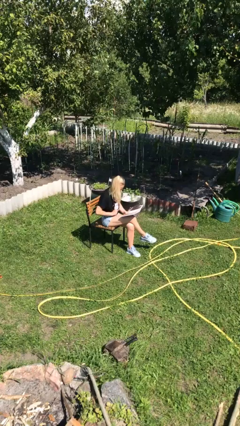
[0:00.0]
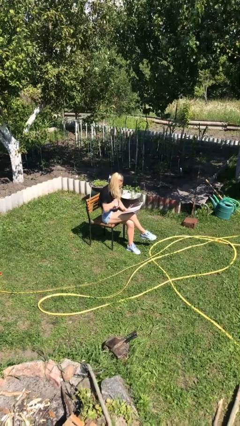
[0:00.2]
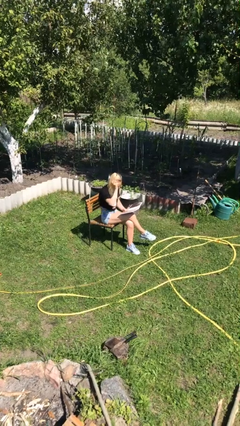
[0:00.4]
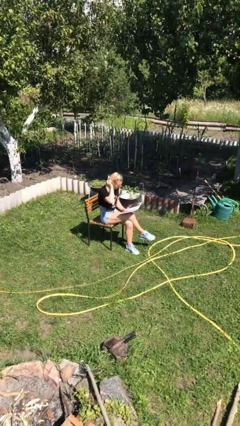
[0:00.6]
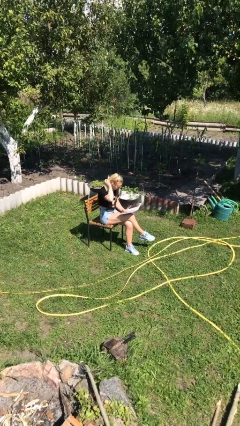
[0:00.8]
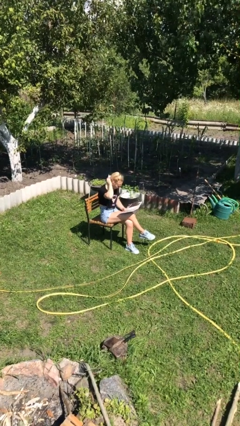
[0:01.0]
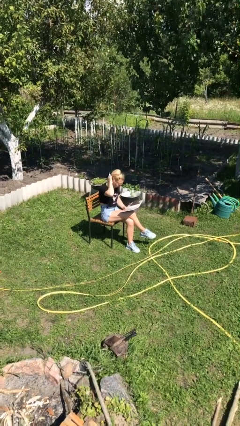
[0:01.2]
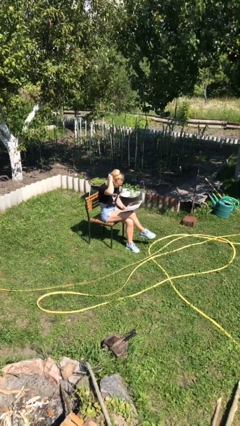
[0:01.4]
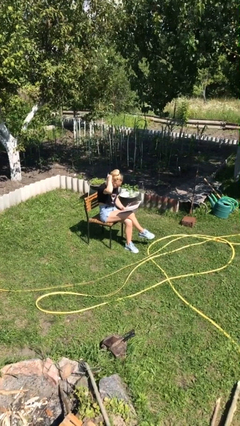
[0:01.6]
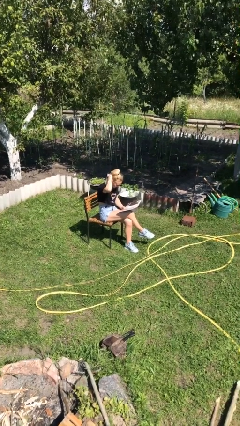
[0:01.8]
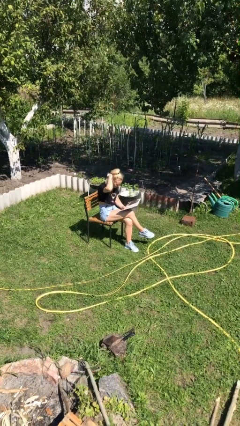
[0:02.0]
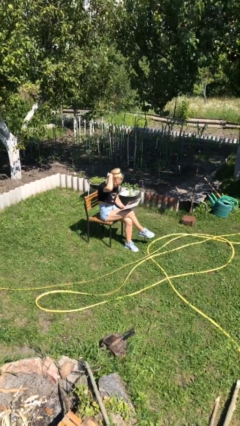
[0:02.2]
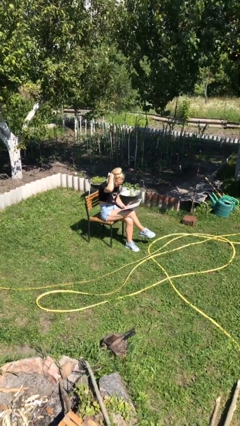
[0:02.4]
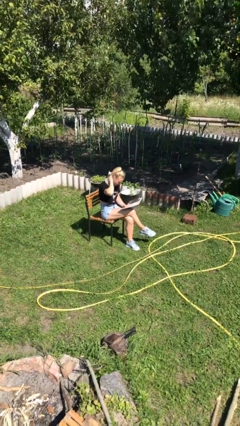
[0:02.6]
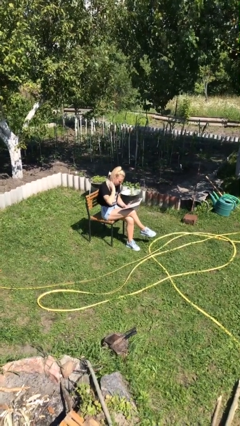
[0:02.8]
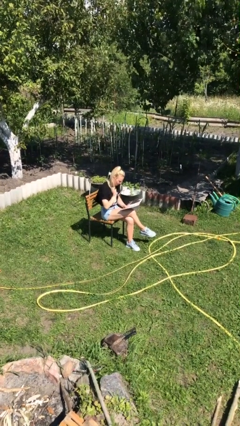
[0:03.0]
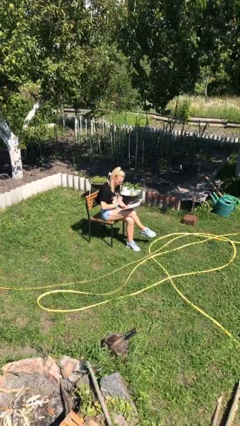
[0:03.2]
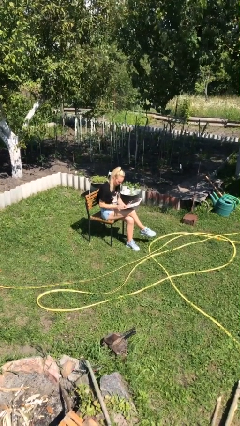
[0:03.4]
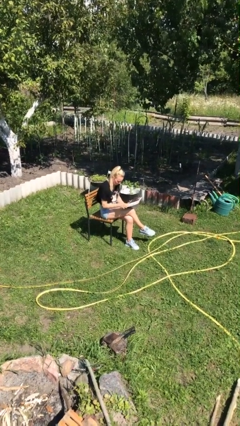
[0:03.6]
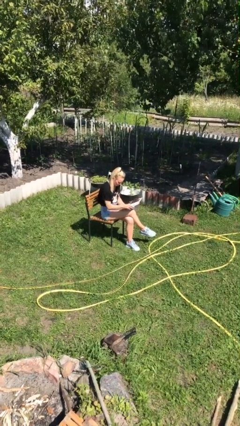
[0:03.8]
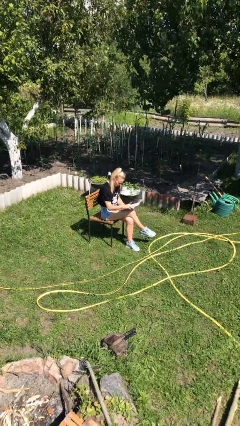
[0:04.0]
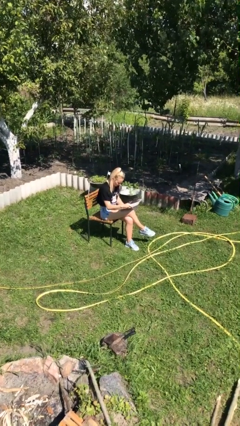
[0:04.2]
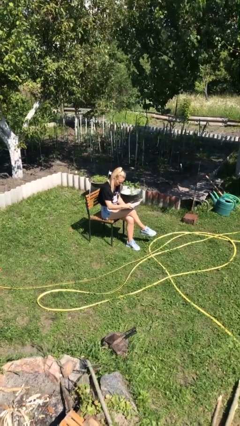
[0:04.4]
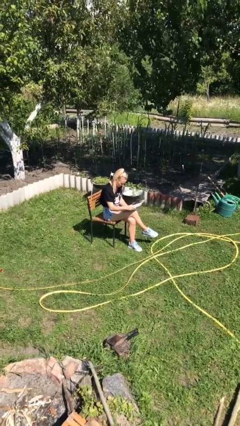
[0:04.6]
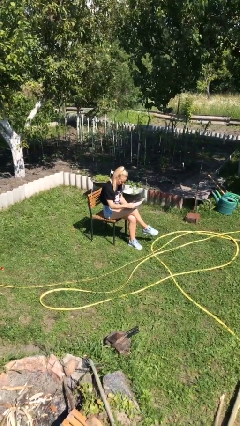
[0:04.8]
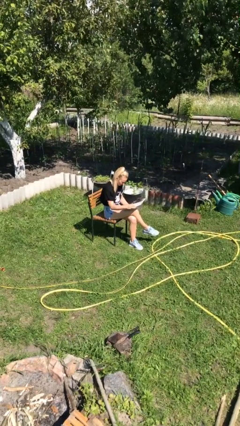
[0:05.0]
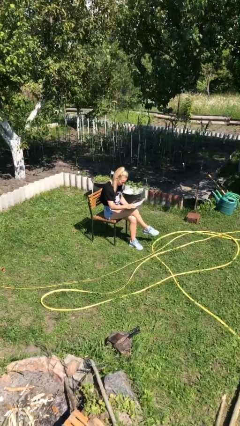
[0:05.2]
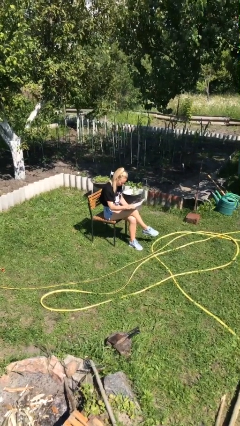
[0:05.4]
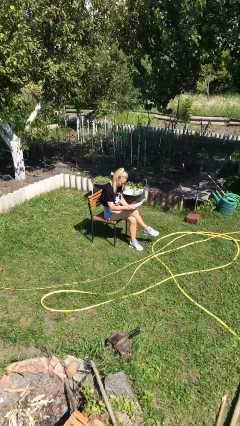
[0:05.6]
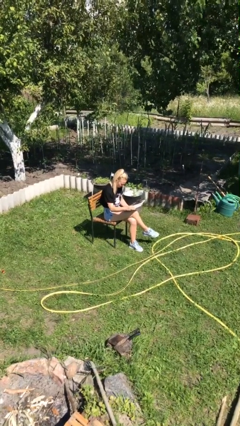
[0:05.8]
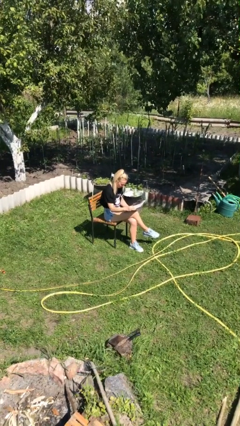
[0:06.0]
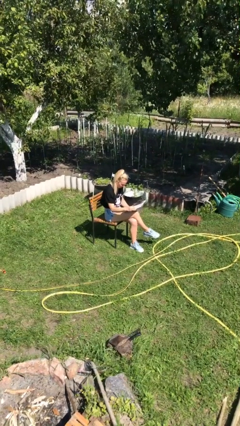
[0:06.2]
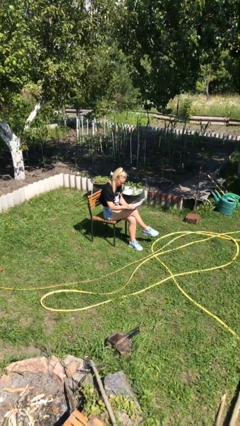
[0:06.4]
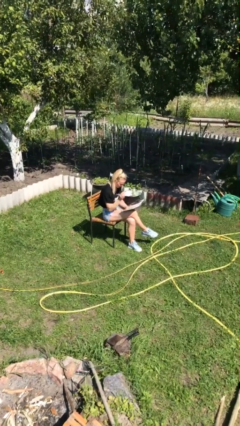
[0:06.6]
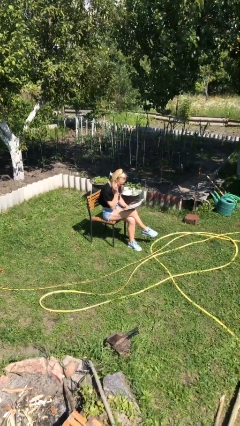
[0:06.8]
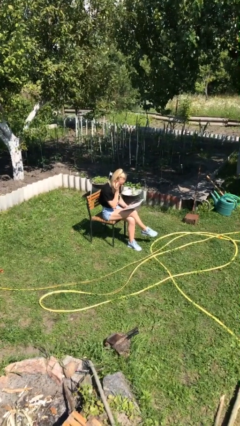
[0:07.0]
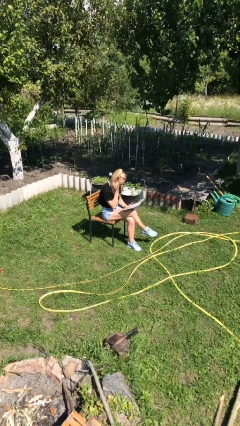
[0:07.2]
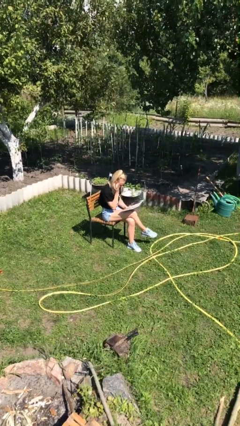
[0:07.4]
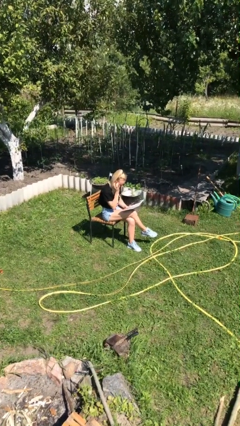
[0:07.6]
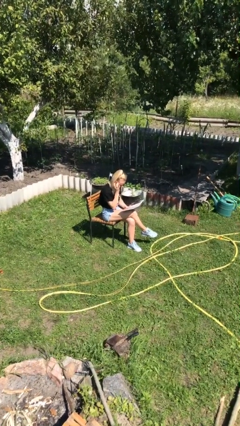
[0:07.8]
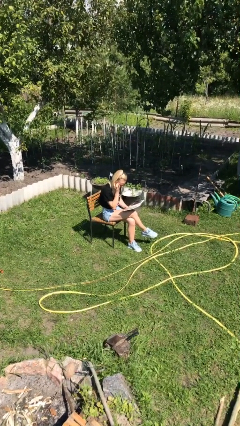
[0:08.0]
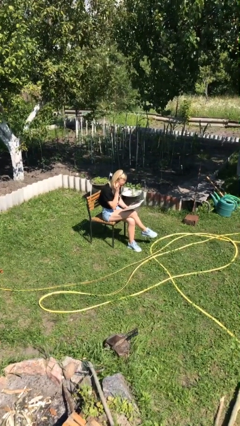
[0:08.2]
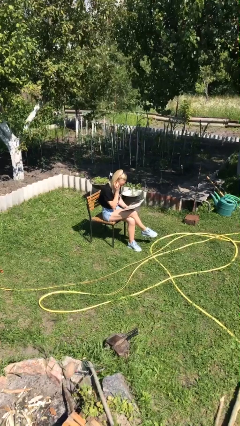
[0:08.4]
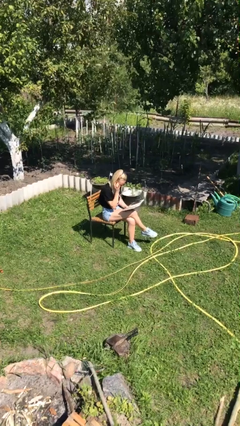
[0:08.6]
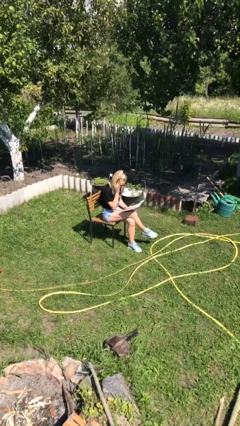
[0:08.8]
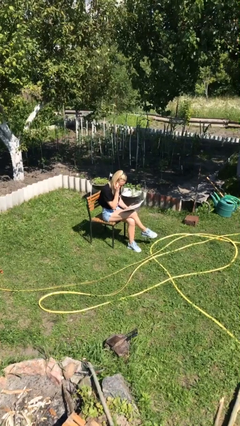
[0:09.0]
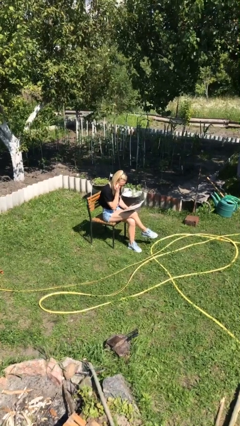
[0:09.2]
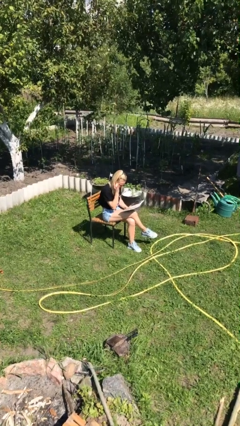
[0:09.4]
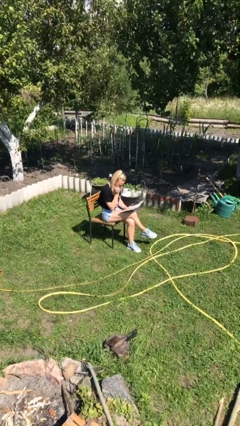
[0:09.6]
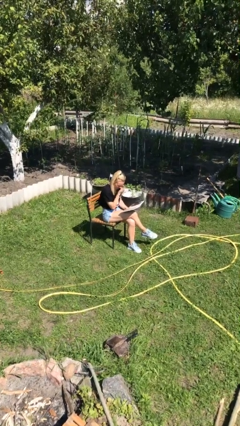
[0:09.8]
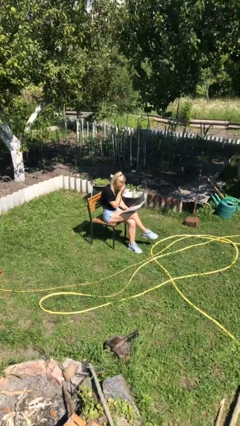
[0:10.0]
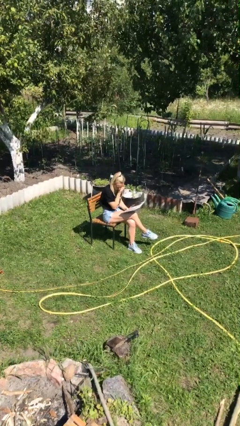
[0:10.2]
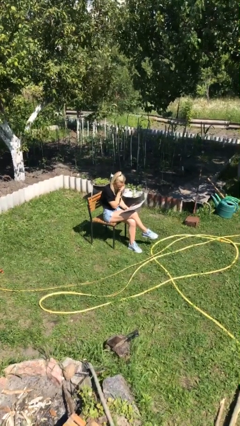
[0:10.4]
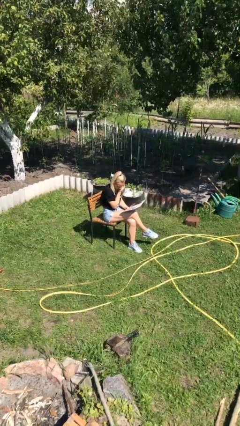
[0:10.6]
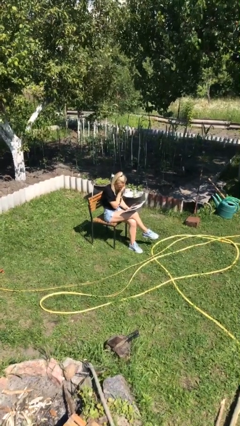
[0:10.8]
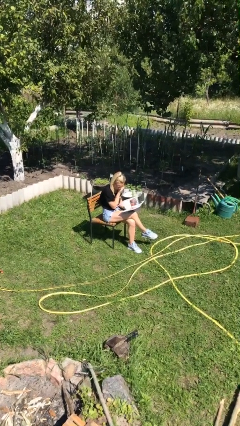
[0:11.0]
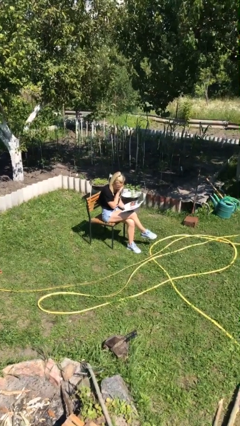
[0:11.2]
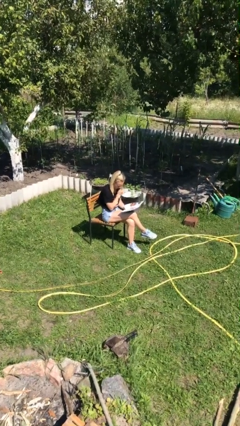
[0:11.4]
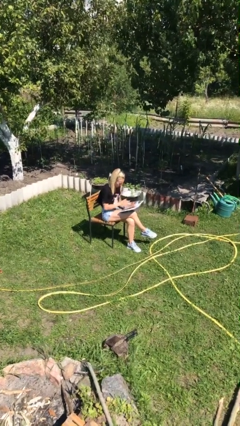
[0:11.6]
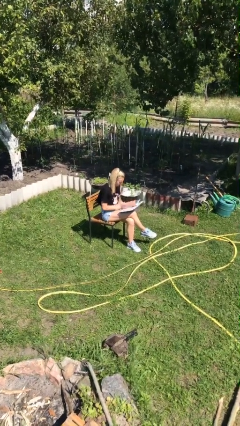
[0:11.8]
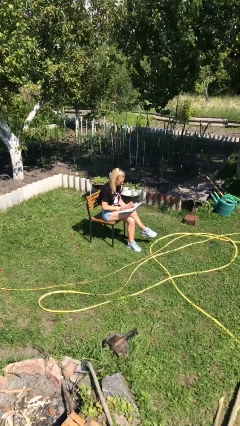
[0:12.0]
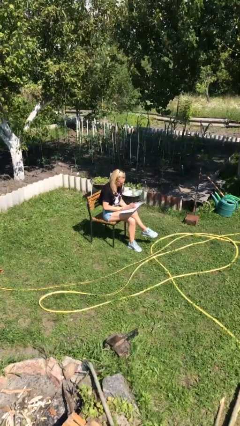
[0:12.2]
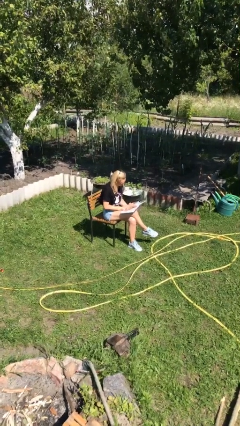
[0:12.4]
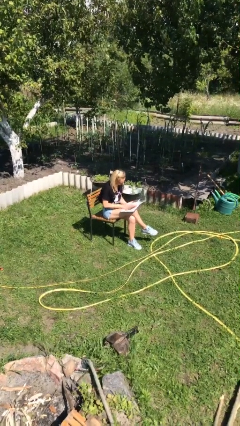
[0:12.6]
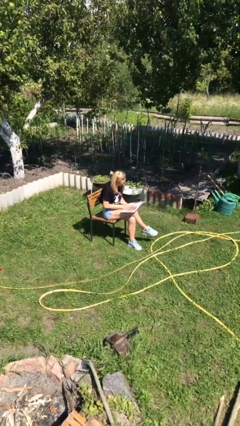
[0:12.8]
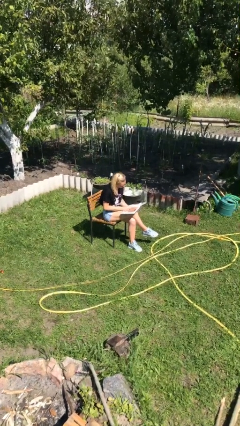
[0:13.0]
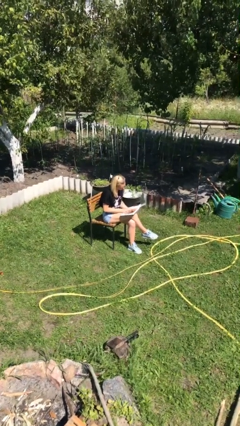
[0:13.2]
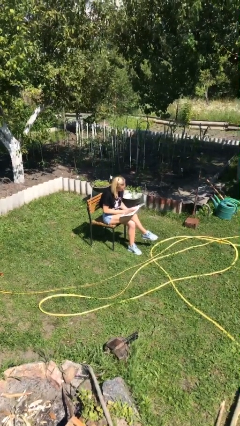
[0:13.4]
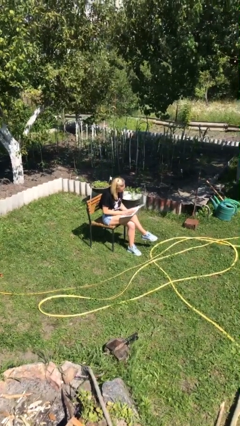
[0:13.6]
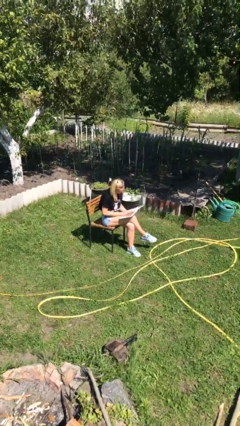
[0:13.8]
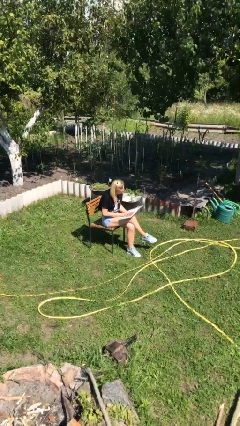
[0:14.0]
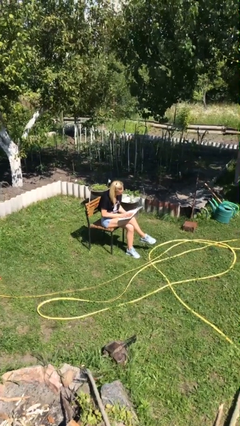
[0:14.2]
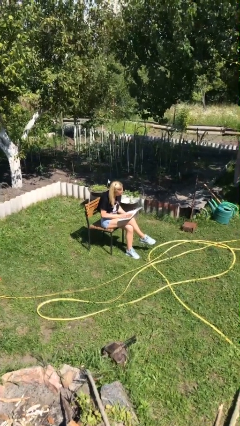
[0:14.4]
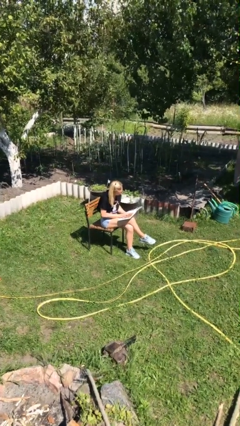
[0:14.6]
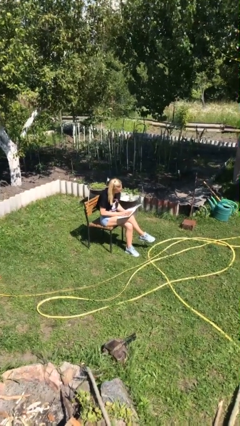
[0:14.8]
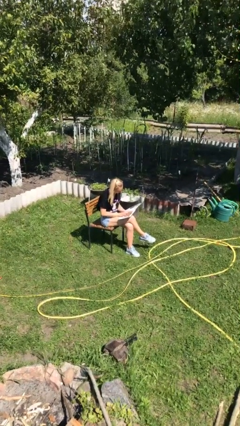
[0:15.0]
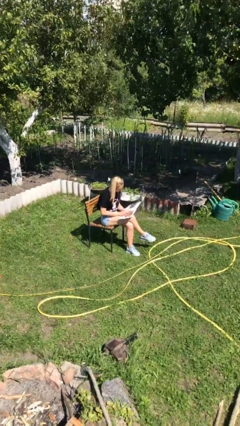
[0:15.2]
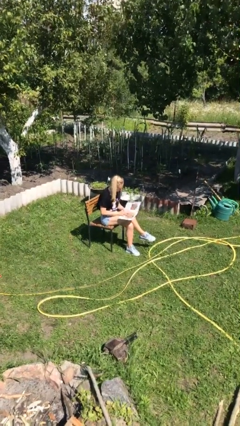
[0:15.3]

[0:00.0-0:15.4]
person reads document

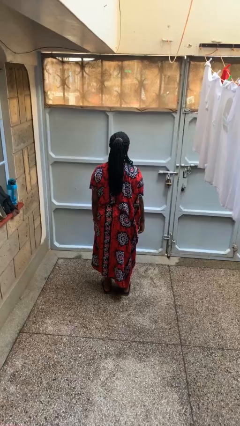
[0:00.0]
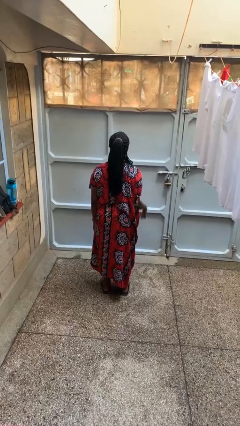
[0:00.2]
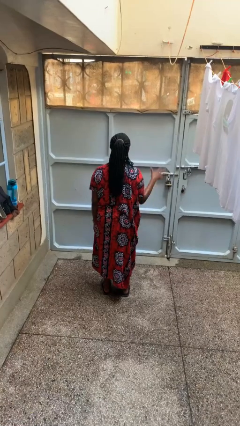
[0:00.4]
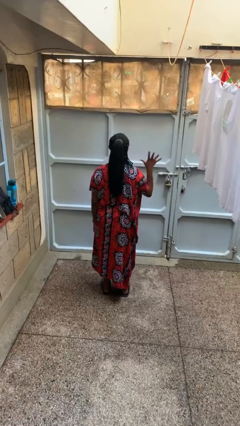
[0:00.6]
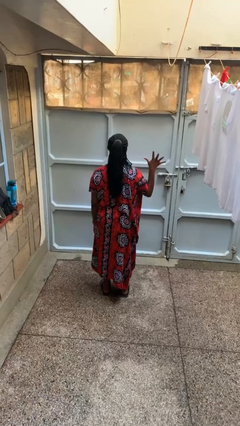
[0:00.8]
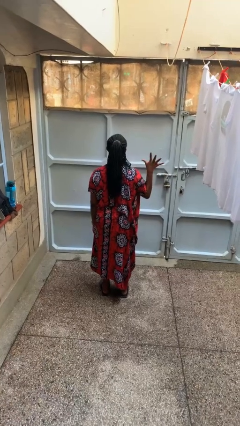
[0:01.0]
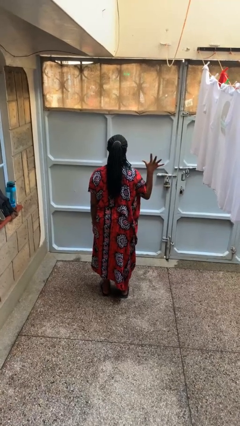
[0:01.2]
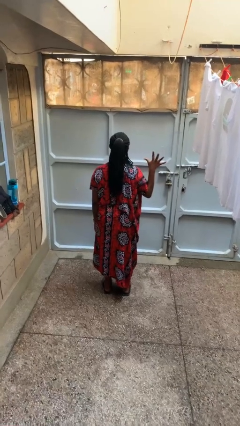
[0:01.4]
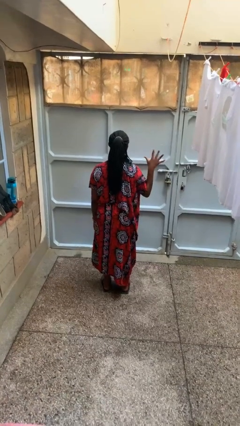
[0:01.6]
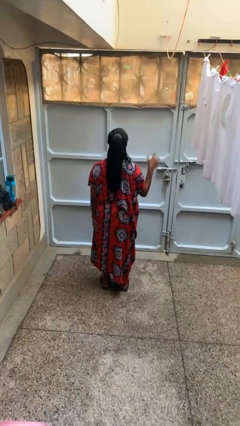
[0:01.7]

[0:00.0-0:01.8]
person gestures number five

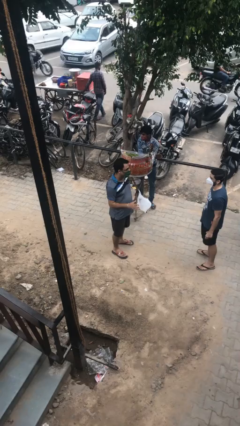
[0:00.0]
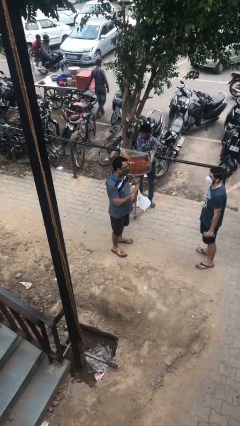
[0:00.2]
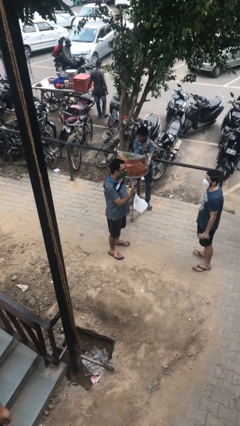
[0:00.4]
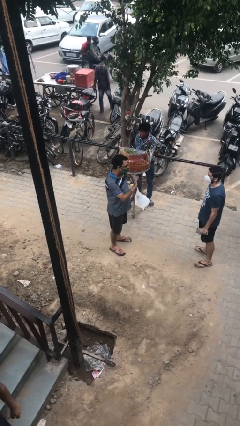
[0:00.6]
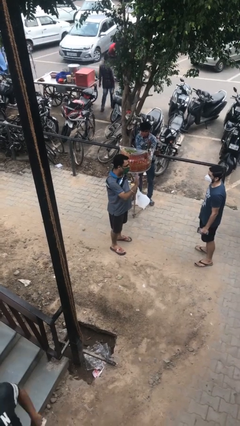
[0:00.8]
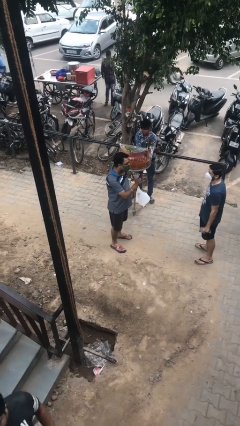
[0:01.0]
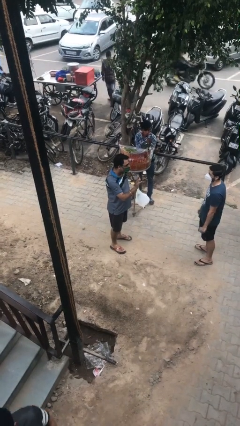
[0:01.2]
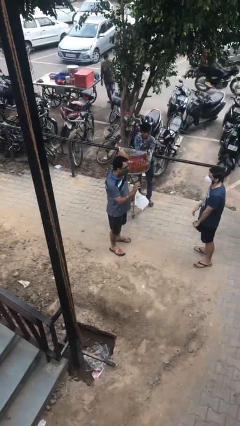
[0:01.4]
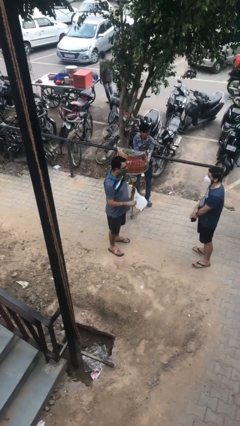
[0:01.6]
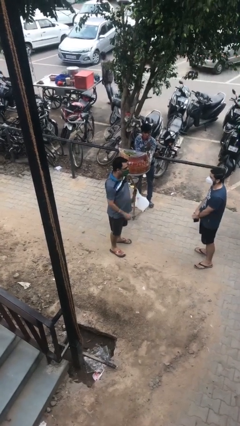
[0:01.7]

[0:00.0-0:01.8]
person waves at person
